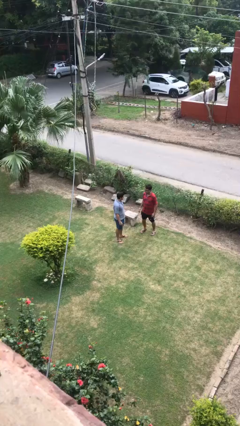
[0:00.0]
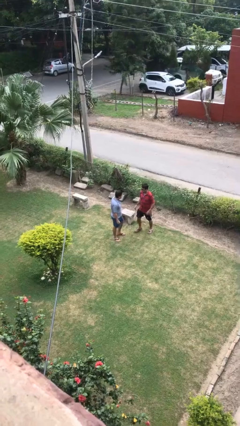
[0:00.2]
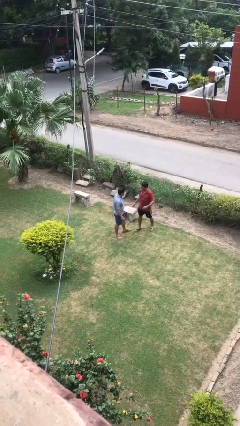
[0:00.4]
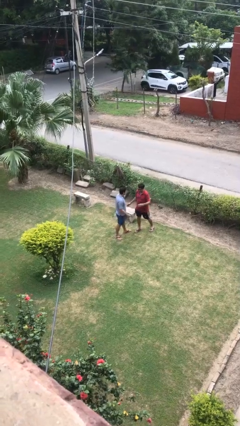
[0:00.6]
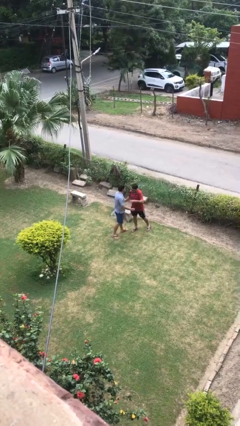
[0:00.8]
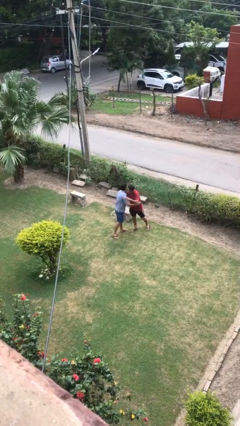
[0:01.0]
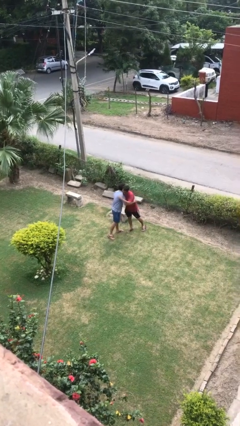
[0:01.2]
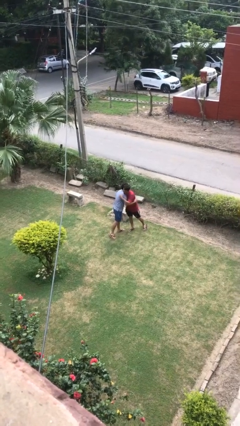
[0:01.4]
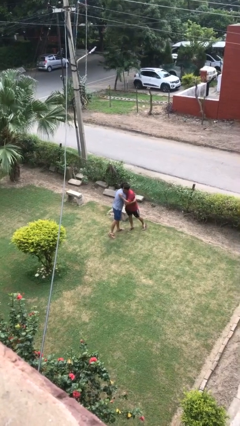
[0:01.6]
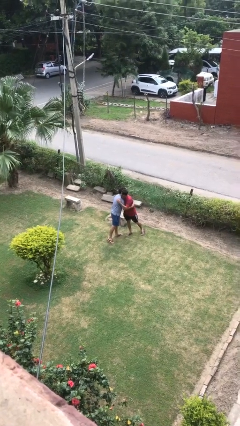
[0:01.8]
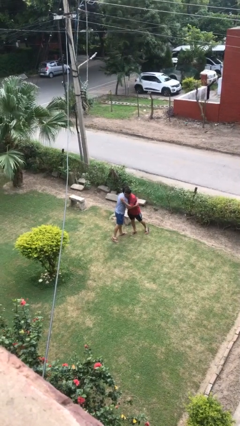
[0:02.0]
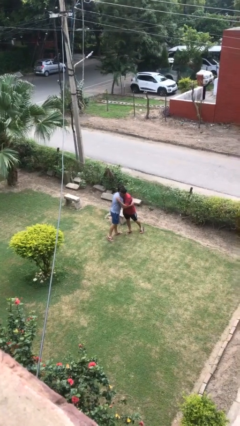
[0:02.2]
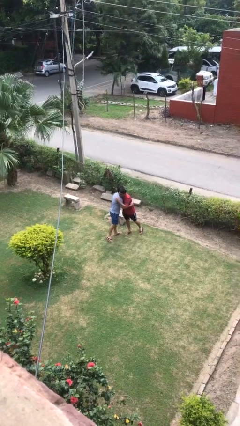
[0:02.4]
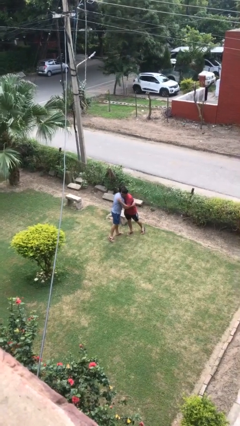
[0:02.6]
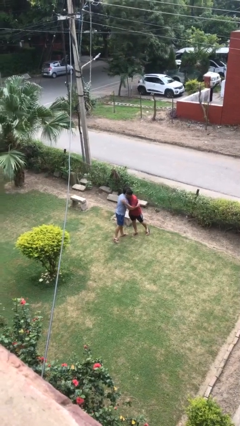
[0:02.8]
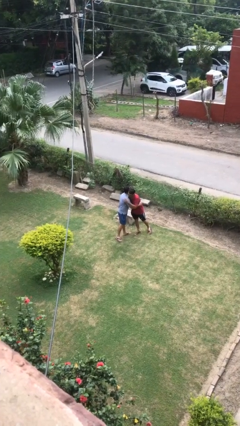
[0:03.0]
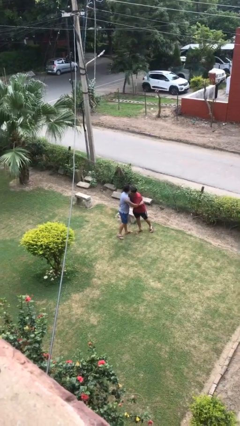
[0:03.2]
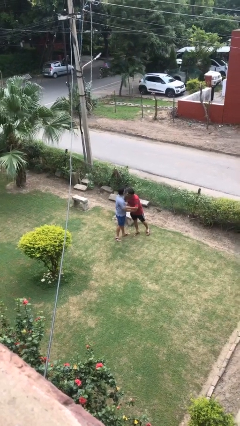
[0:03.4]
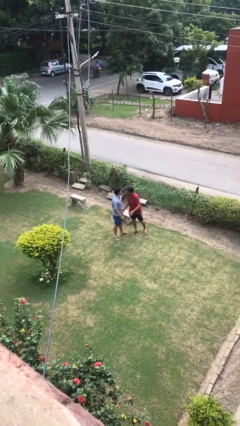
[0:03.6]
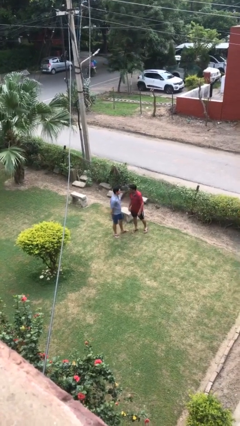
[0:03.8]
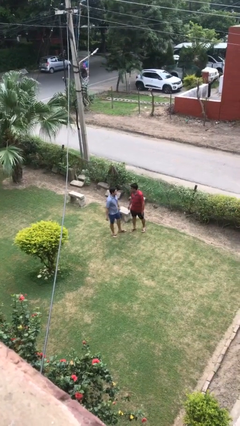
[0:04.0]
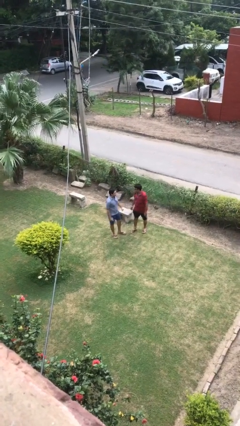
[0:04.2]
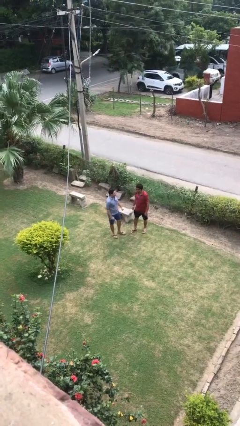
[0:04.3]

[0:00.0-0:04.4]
person embraces person

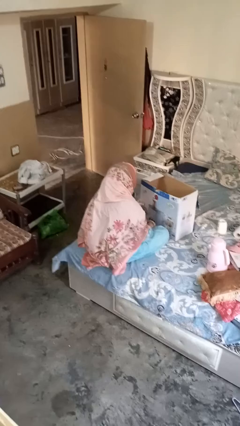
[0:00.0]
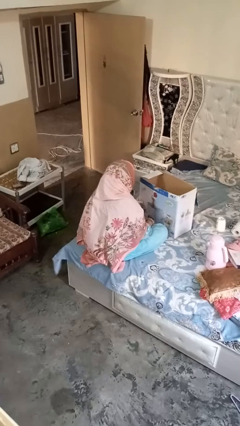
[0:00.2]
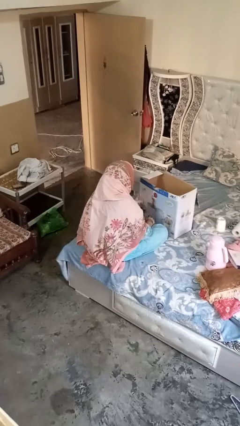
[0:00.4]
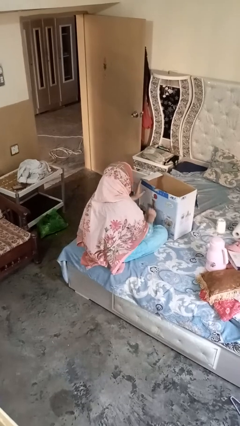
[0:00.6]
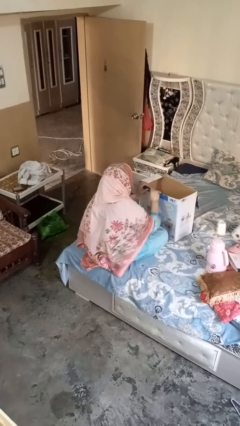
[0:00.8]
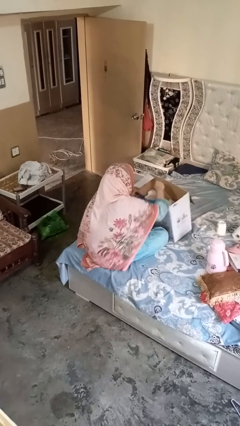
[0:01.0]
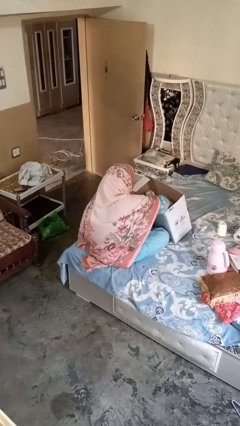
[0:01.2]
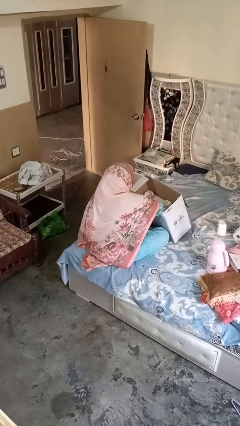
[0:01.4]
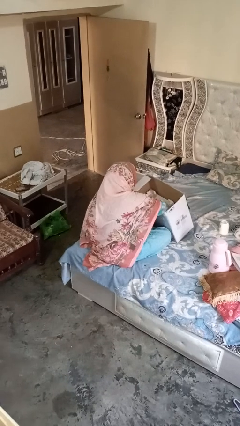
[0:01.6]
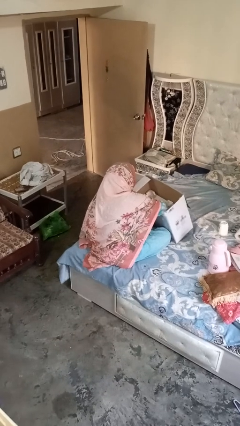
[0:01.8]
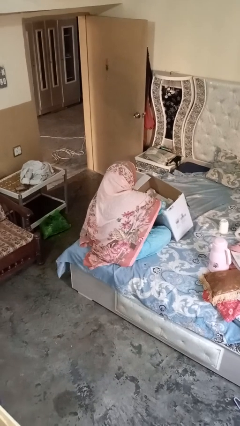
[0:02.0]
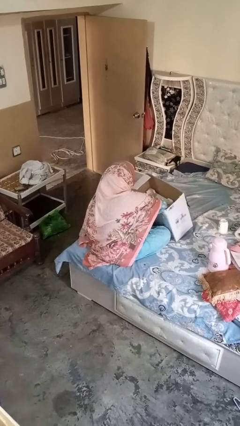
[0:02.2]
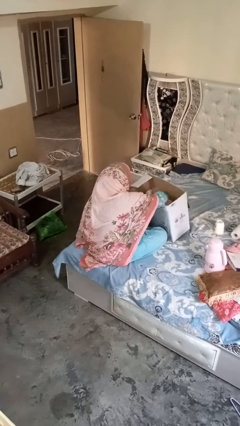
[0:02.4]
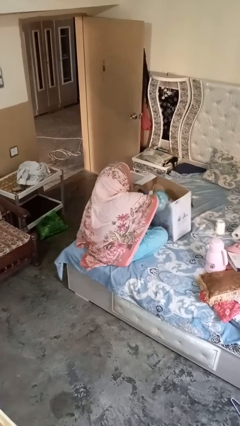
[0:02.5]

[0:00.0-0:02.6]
person searches in box

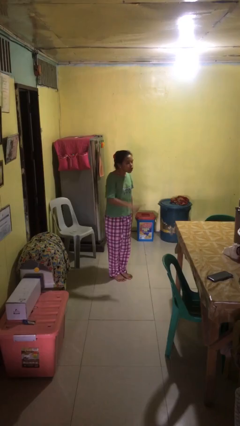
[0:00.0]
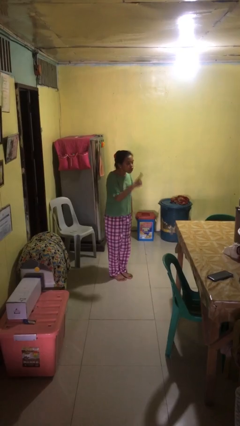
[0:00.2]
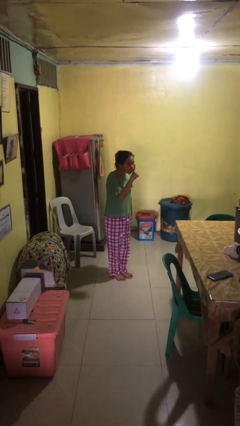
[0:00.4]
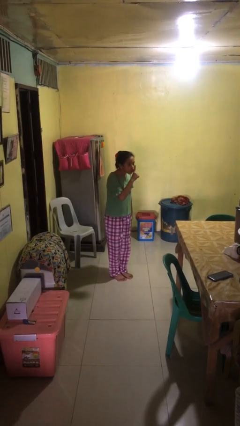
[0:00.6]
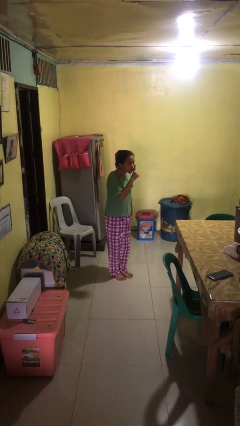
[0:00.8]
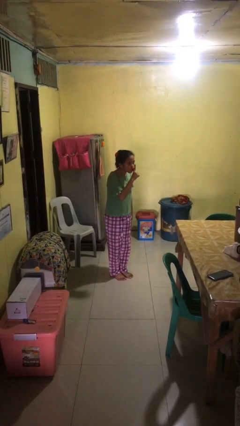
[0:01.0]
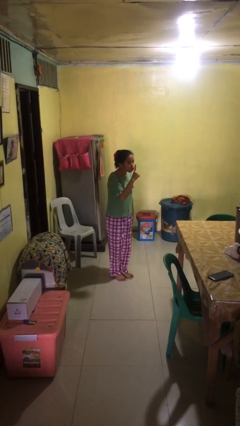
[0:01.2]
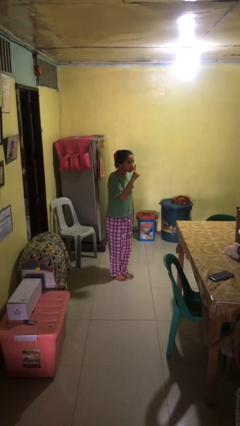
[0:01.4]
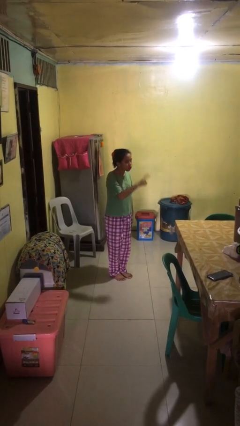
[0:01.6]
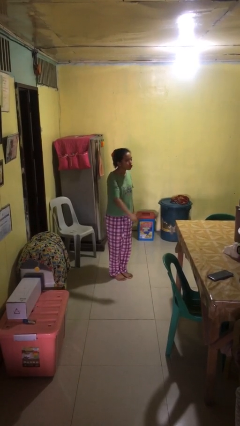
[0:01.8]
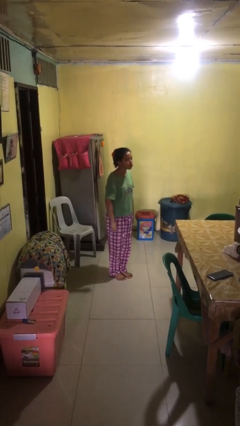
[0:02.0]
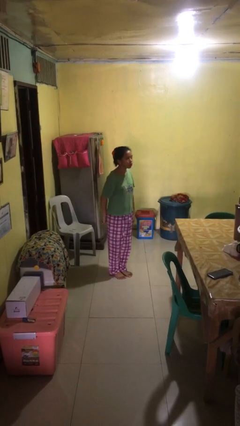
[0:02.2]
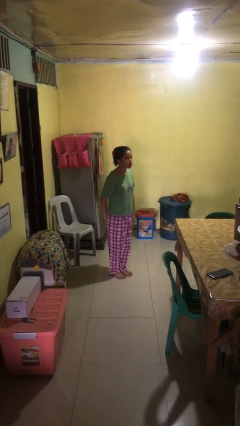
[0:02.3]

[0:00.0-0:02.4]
person gestures be quiet

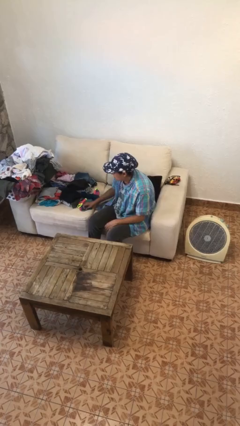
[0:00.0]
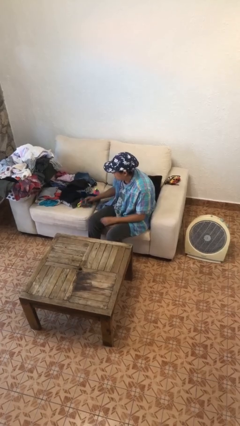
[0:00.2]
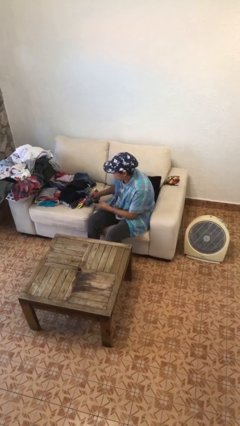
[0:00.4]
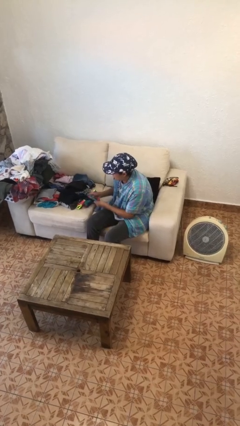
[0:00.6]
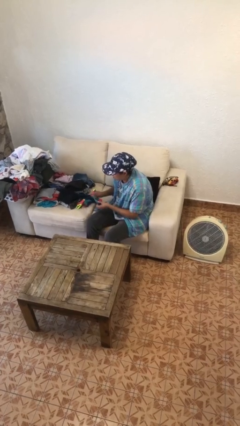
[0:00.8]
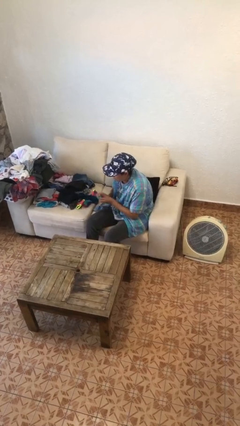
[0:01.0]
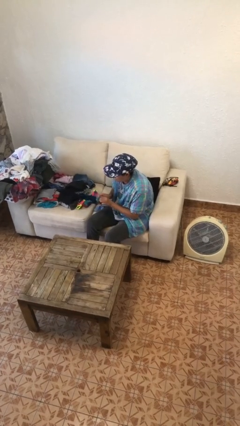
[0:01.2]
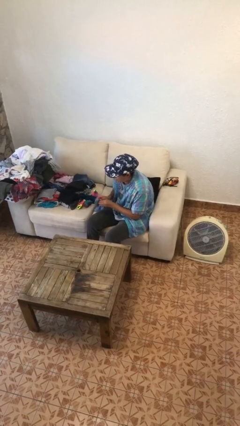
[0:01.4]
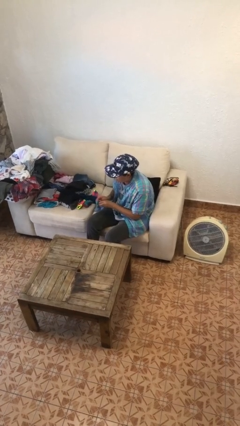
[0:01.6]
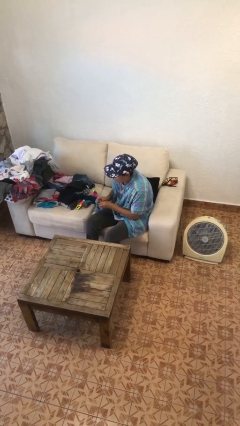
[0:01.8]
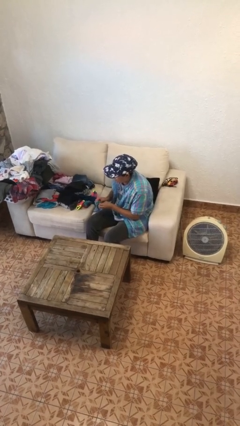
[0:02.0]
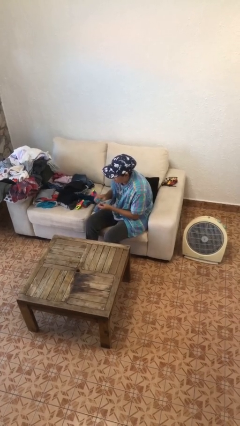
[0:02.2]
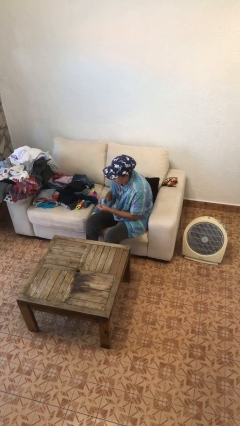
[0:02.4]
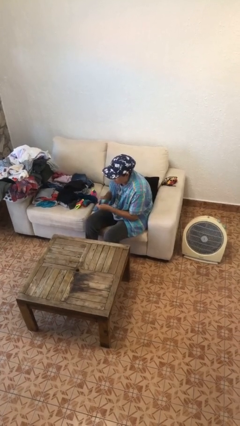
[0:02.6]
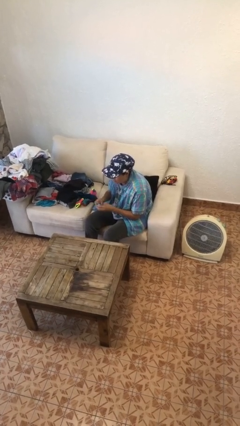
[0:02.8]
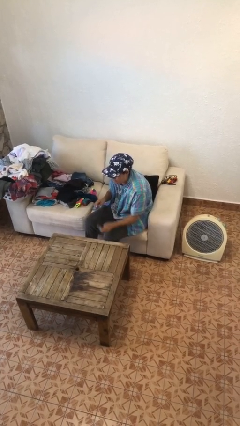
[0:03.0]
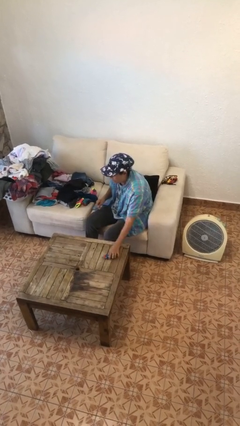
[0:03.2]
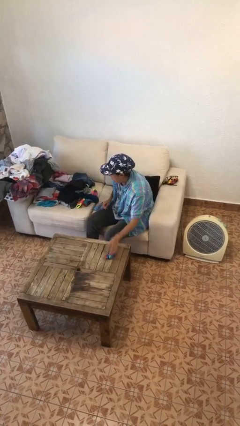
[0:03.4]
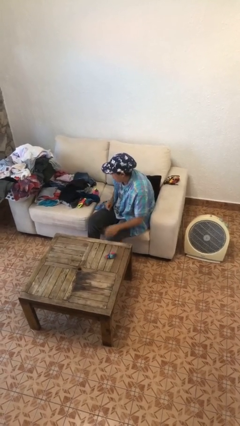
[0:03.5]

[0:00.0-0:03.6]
person folds socks

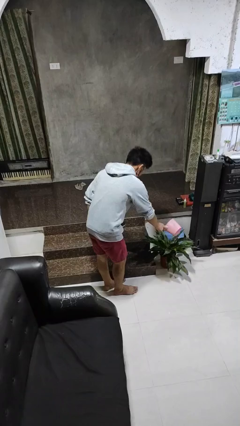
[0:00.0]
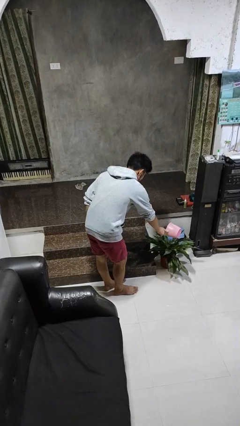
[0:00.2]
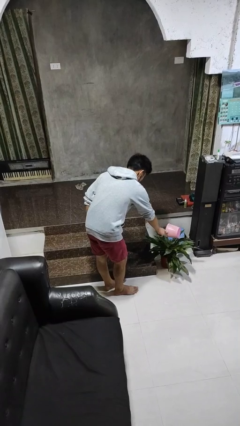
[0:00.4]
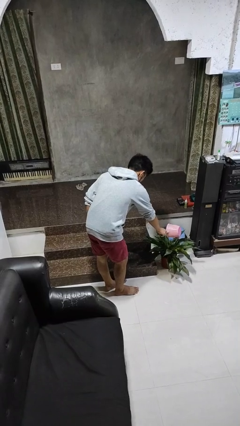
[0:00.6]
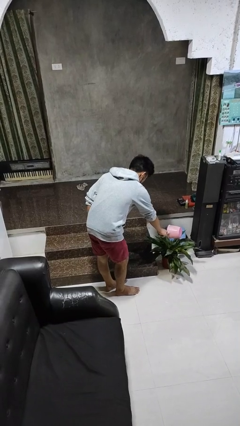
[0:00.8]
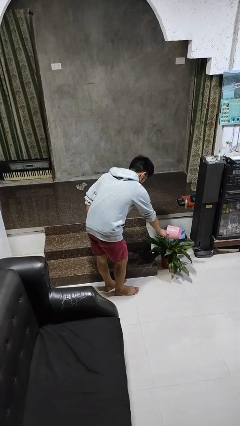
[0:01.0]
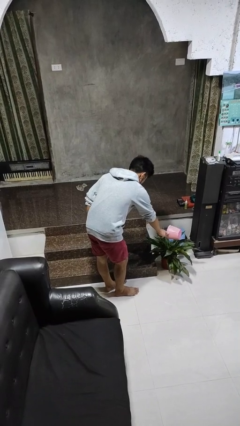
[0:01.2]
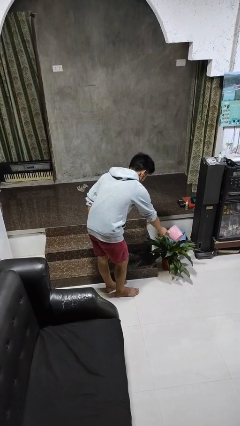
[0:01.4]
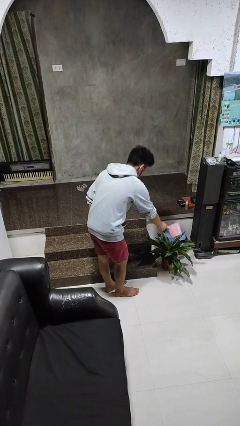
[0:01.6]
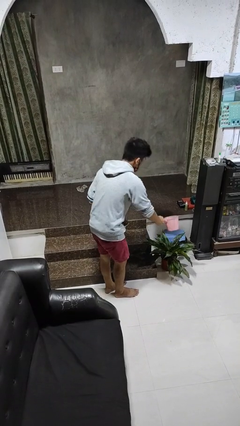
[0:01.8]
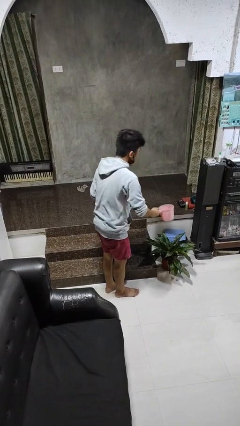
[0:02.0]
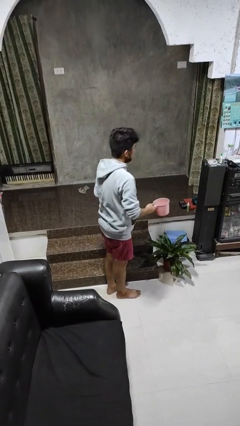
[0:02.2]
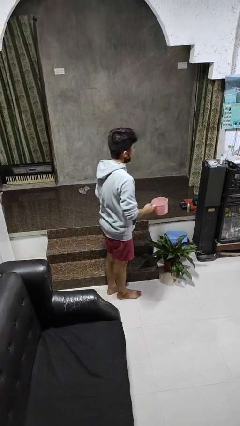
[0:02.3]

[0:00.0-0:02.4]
person waters houseplant

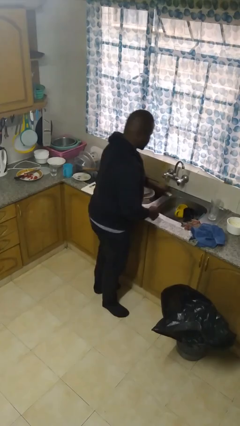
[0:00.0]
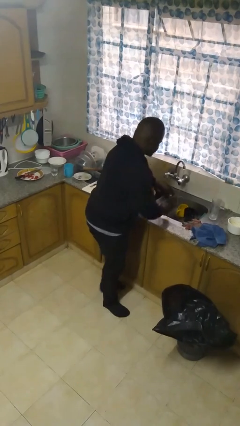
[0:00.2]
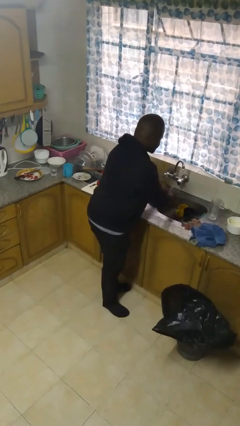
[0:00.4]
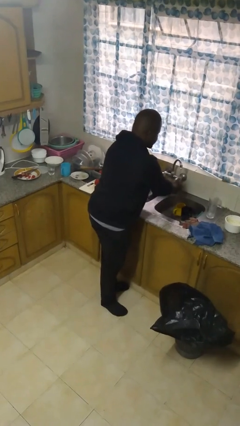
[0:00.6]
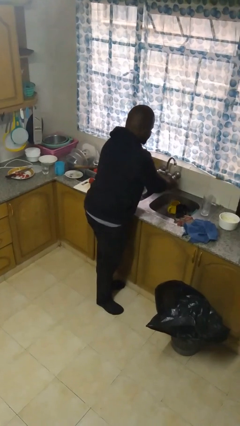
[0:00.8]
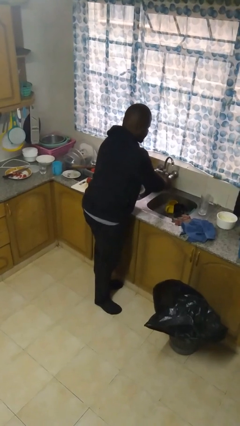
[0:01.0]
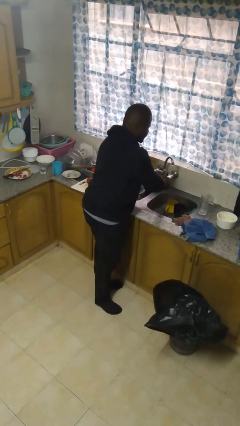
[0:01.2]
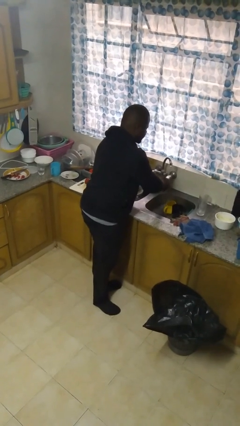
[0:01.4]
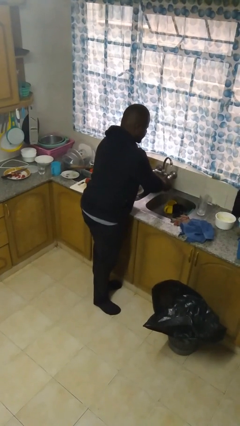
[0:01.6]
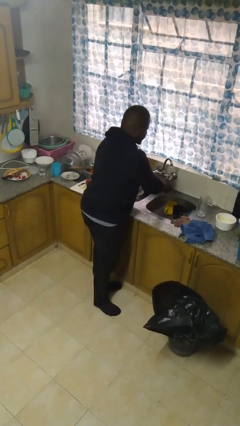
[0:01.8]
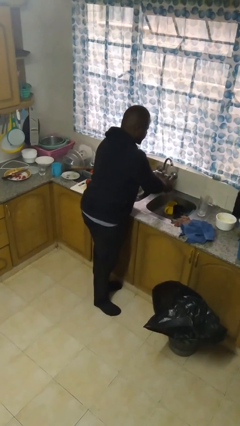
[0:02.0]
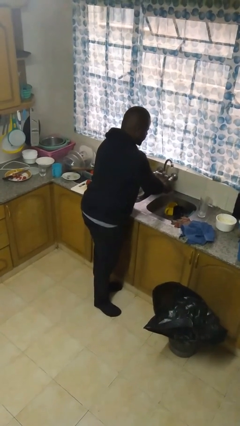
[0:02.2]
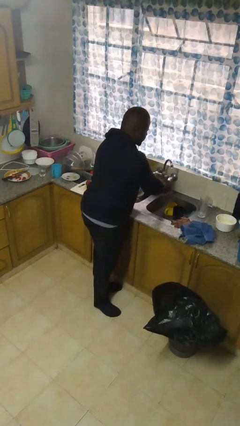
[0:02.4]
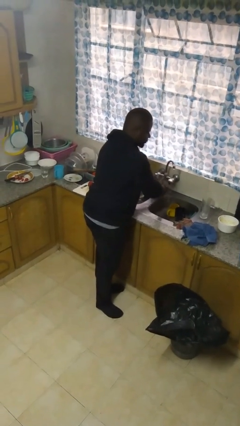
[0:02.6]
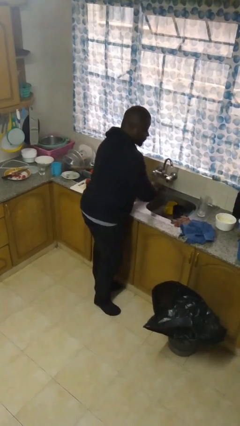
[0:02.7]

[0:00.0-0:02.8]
person washes hands
